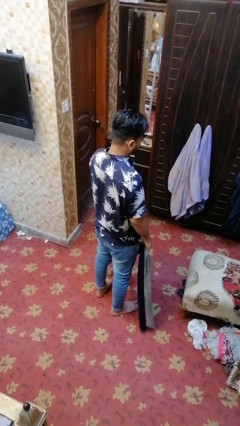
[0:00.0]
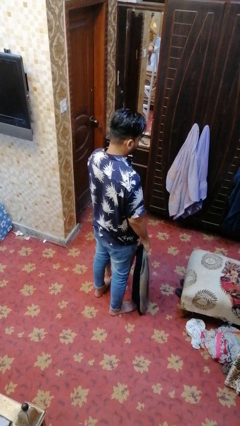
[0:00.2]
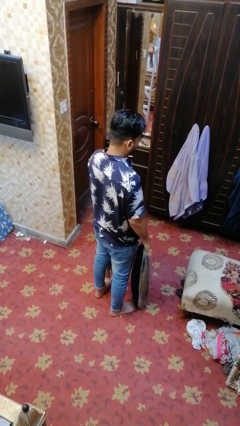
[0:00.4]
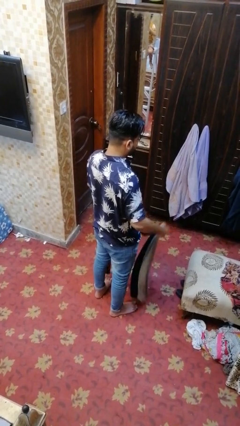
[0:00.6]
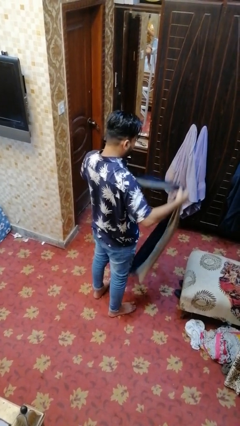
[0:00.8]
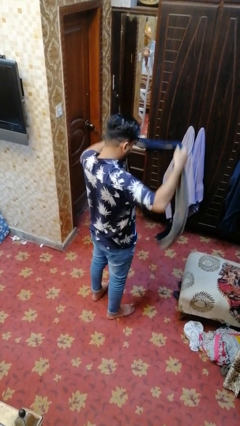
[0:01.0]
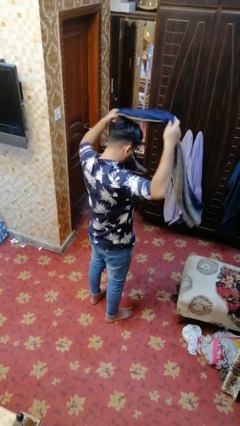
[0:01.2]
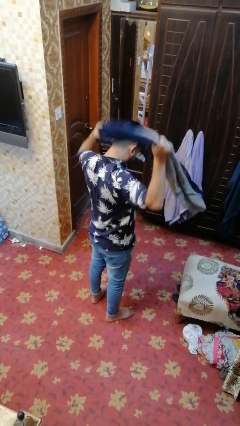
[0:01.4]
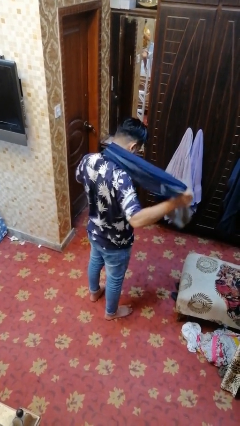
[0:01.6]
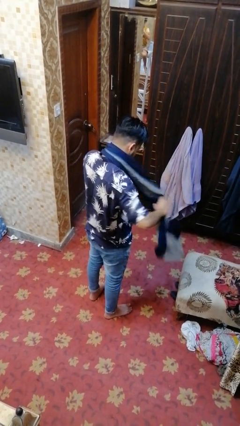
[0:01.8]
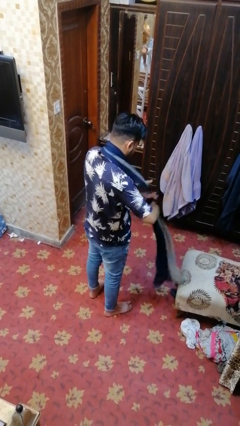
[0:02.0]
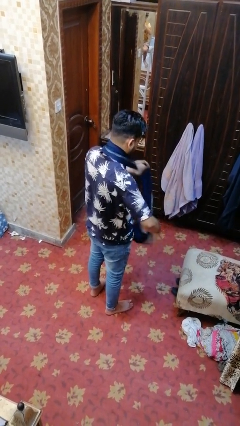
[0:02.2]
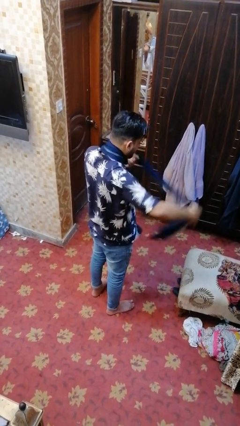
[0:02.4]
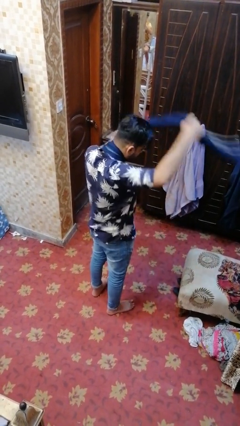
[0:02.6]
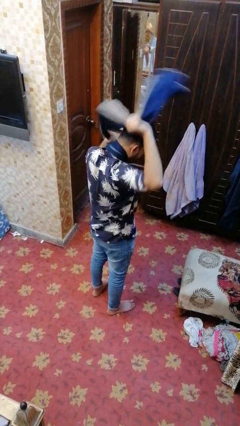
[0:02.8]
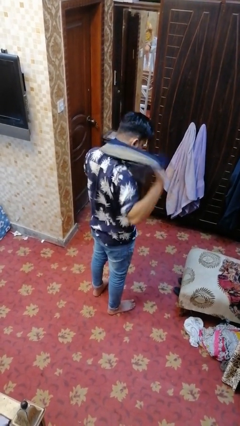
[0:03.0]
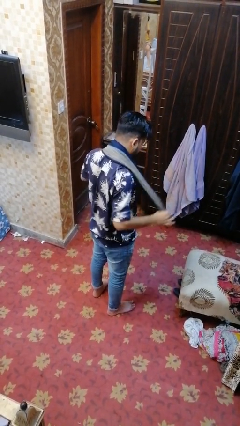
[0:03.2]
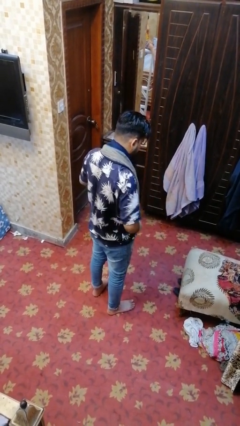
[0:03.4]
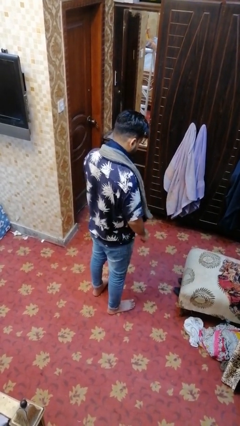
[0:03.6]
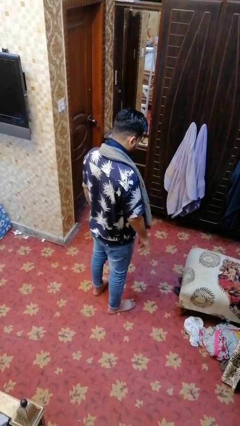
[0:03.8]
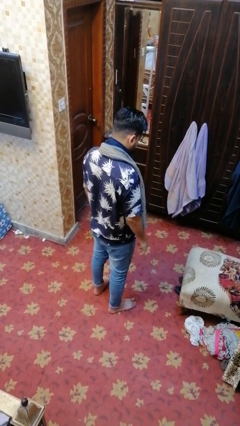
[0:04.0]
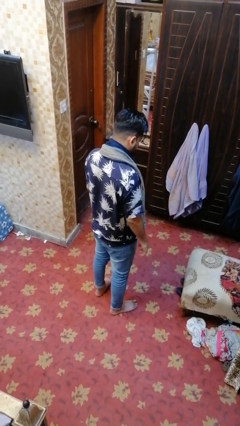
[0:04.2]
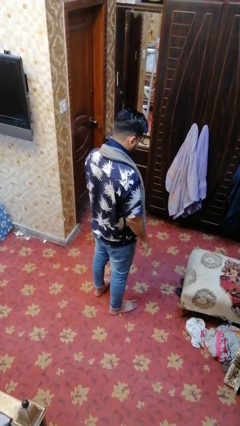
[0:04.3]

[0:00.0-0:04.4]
person puts on scarf

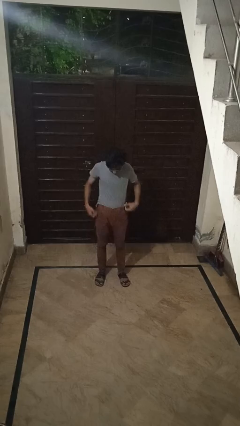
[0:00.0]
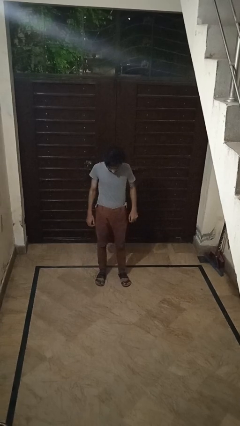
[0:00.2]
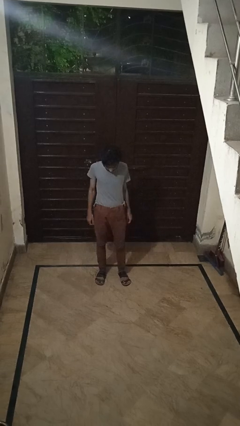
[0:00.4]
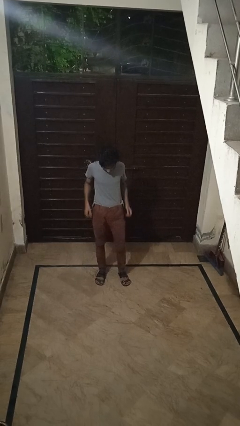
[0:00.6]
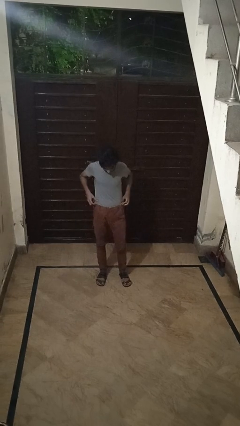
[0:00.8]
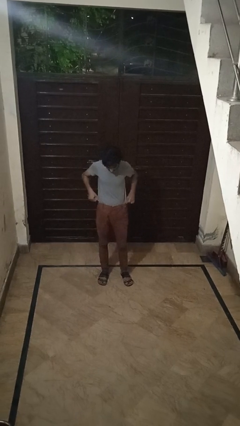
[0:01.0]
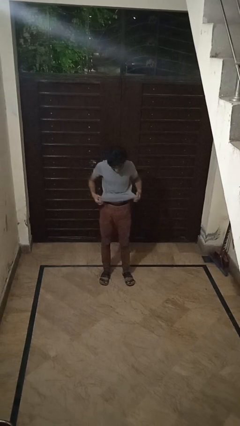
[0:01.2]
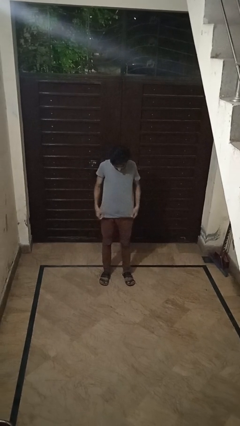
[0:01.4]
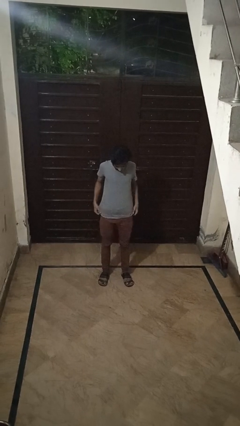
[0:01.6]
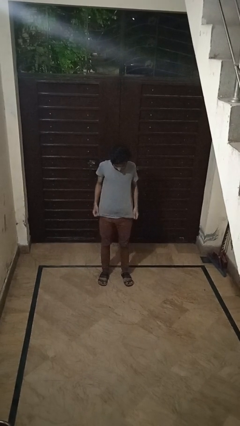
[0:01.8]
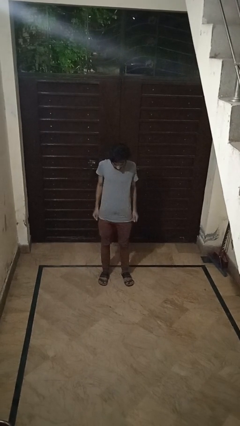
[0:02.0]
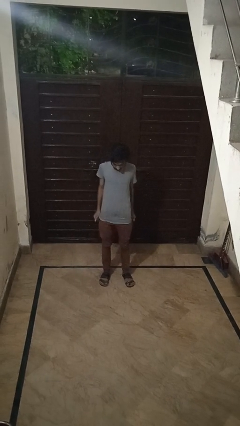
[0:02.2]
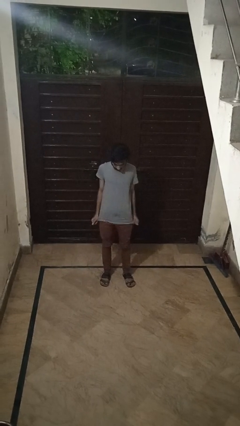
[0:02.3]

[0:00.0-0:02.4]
person untucks shirt

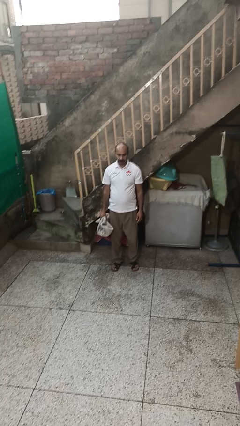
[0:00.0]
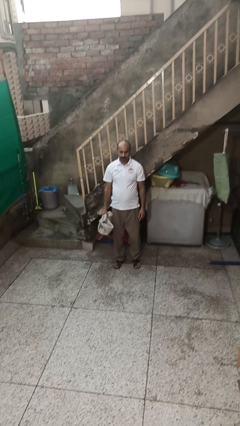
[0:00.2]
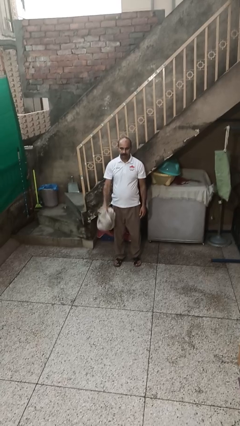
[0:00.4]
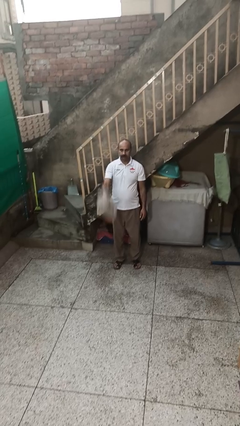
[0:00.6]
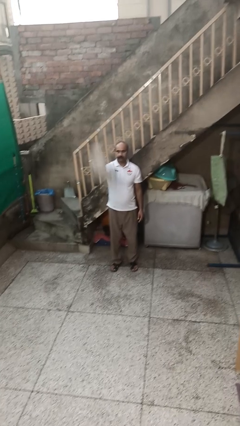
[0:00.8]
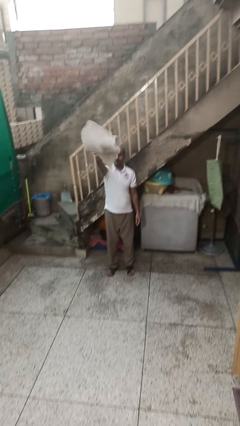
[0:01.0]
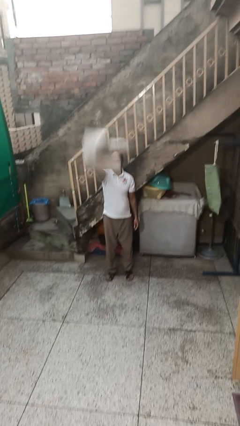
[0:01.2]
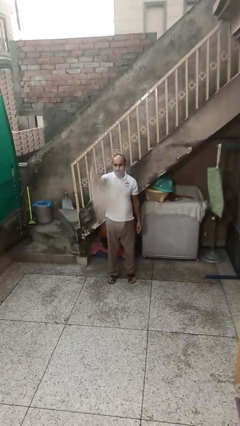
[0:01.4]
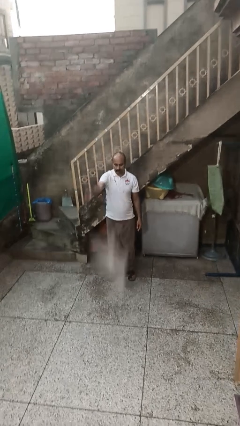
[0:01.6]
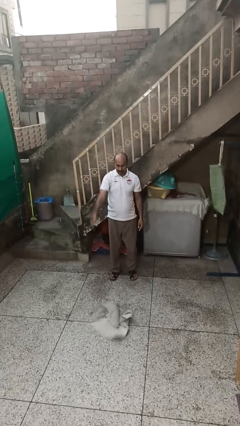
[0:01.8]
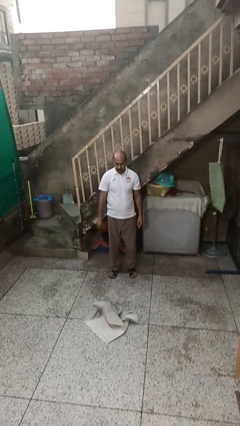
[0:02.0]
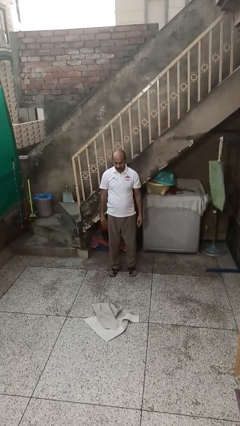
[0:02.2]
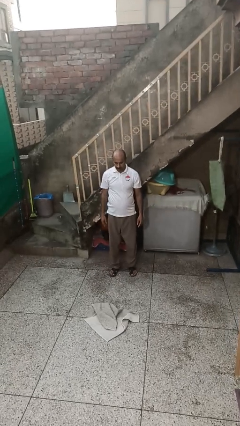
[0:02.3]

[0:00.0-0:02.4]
person throws object into air

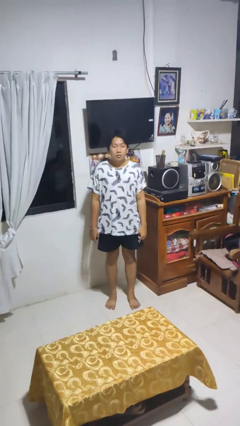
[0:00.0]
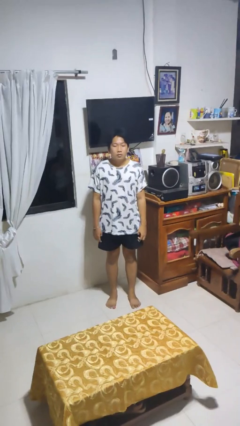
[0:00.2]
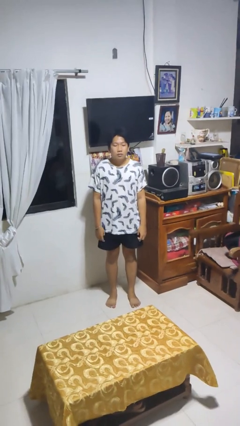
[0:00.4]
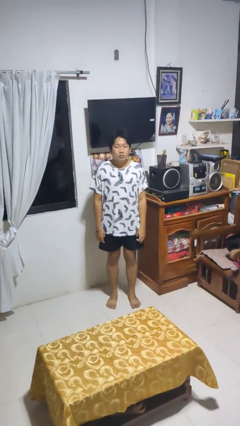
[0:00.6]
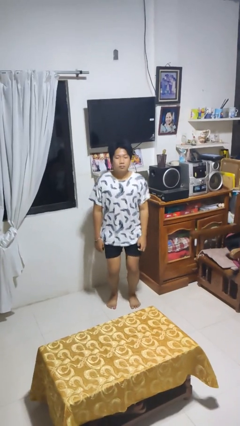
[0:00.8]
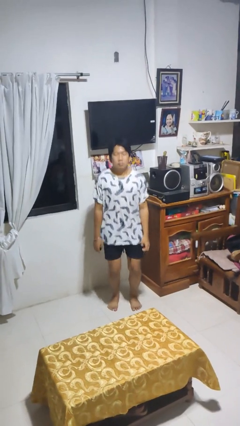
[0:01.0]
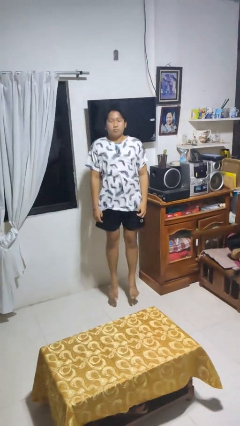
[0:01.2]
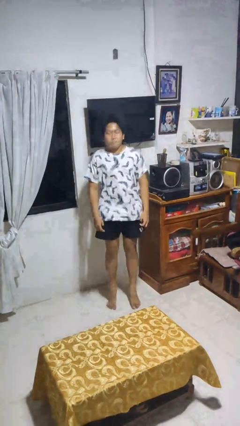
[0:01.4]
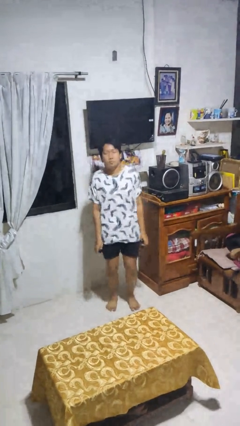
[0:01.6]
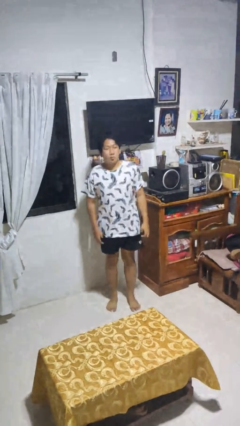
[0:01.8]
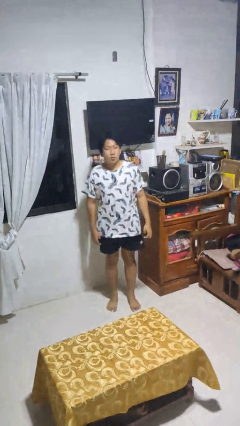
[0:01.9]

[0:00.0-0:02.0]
person jumps

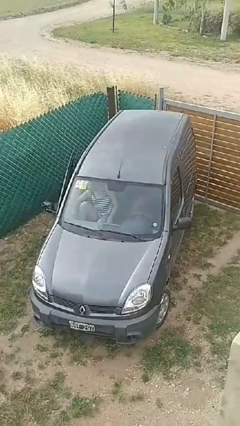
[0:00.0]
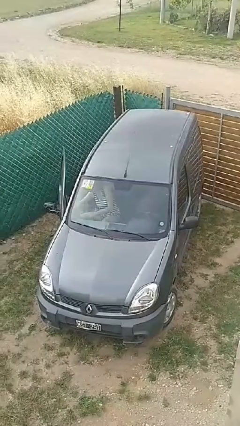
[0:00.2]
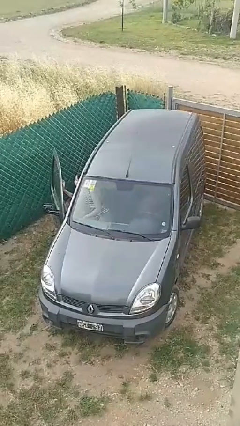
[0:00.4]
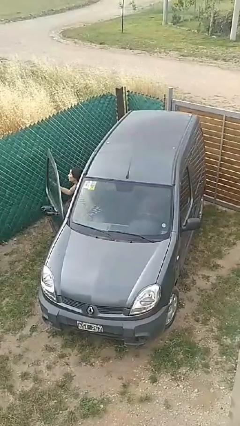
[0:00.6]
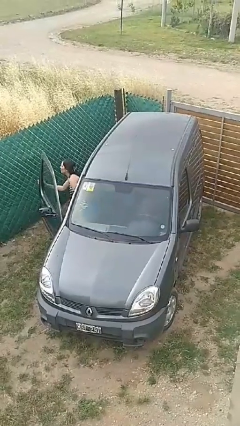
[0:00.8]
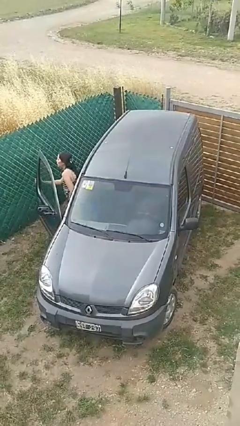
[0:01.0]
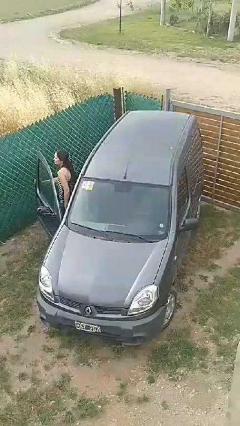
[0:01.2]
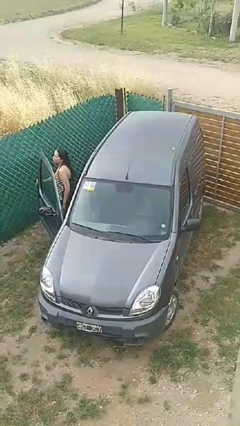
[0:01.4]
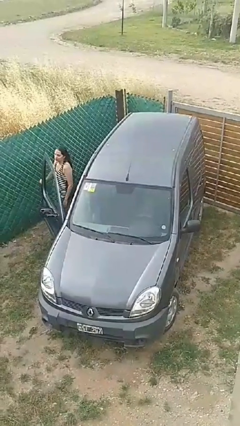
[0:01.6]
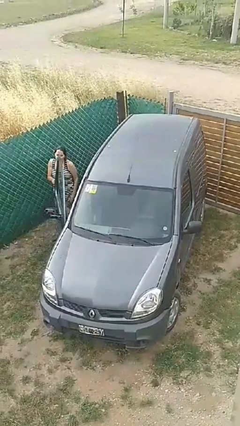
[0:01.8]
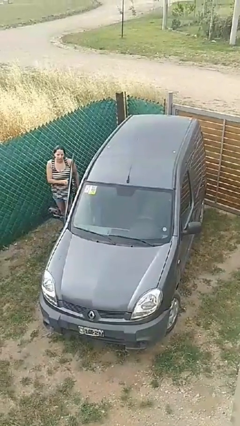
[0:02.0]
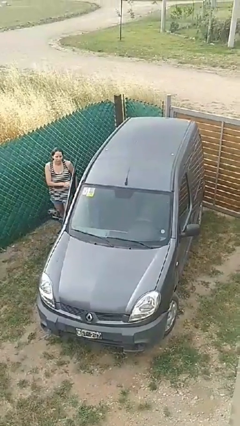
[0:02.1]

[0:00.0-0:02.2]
car drops off person

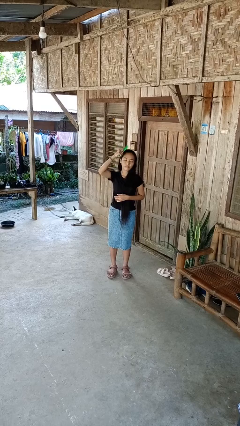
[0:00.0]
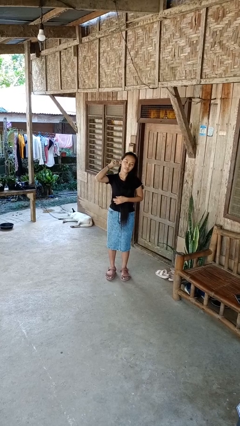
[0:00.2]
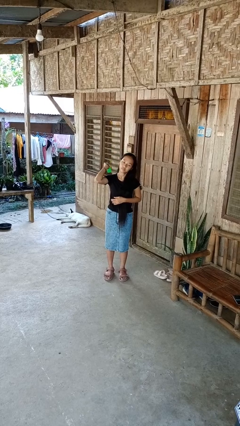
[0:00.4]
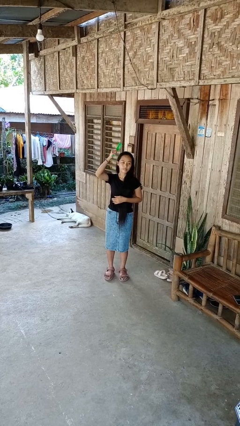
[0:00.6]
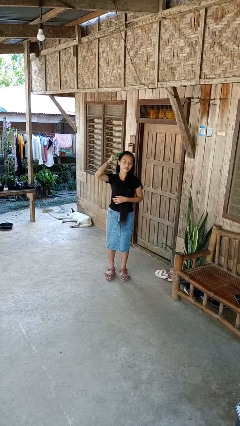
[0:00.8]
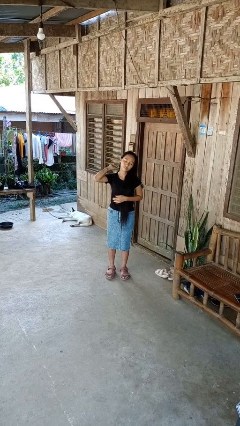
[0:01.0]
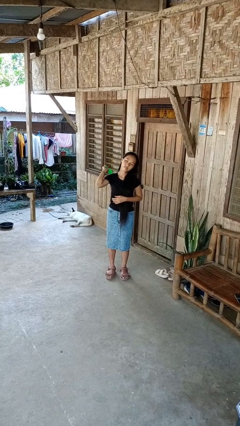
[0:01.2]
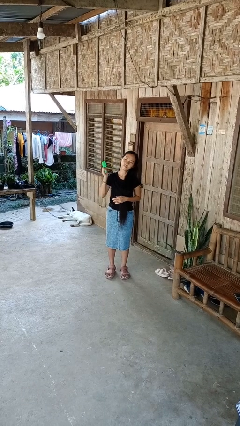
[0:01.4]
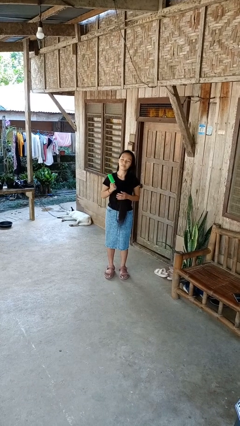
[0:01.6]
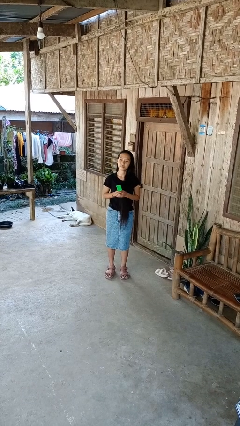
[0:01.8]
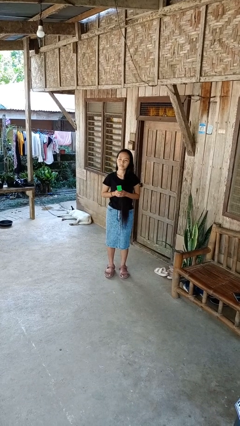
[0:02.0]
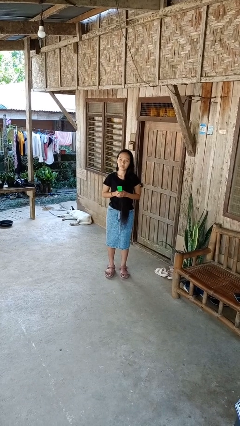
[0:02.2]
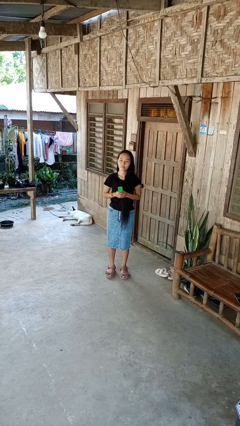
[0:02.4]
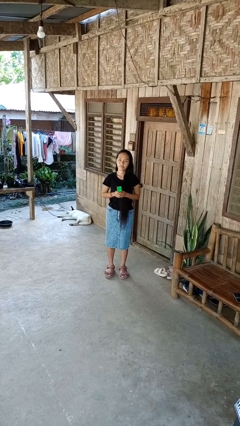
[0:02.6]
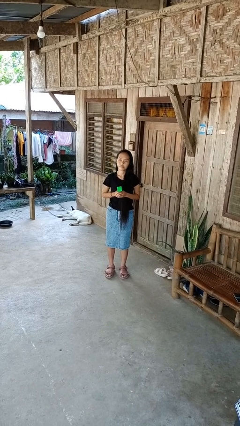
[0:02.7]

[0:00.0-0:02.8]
person brushes hair

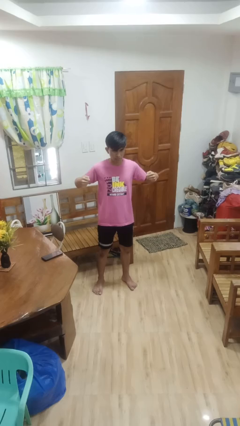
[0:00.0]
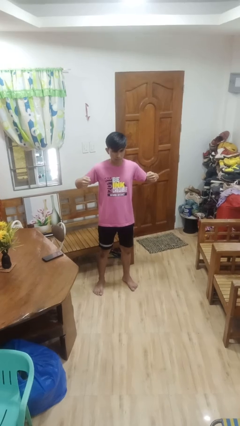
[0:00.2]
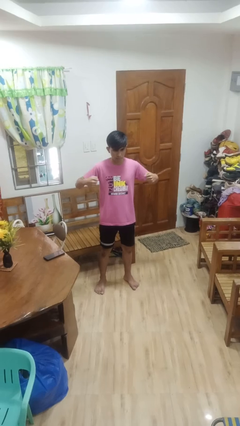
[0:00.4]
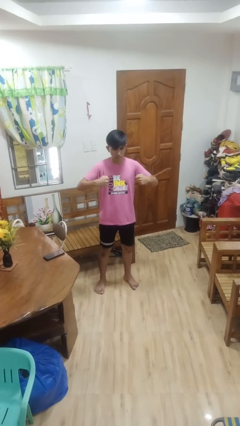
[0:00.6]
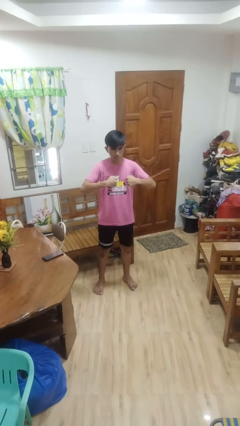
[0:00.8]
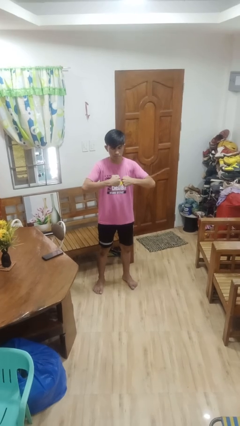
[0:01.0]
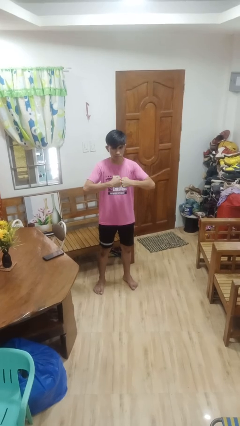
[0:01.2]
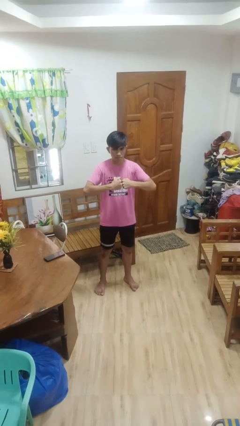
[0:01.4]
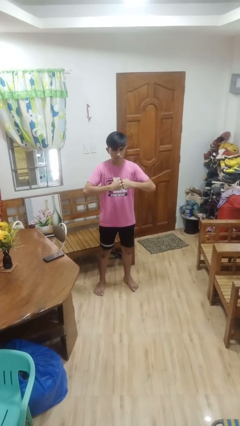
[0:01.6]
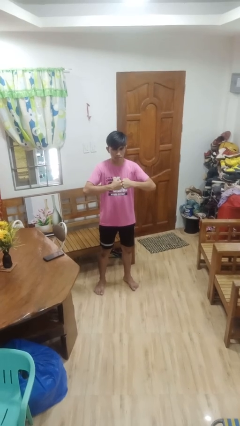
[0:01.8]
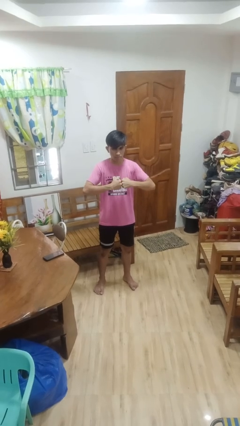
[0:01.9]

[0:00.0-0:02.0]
person gestures zoom out
